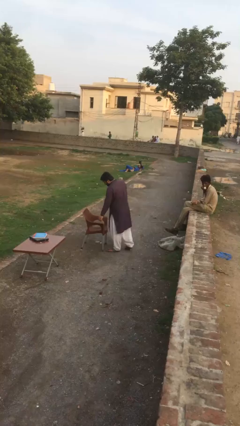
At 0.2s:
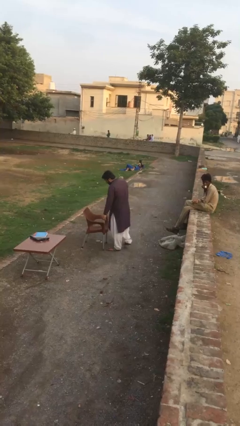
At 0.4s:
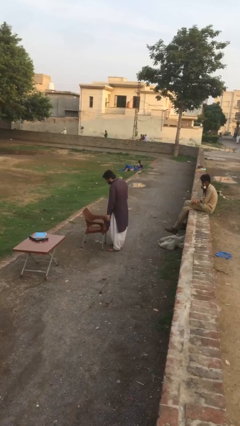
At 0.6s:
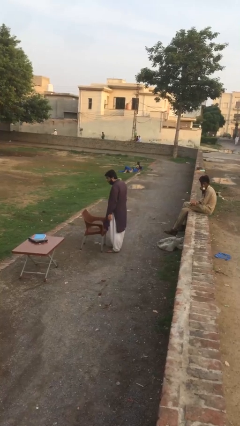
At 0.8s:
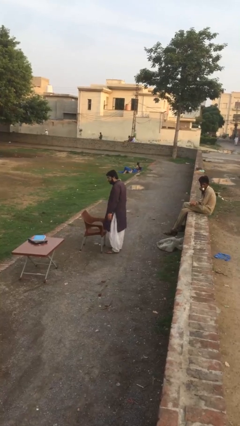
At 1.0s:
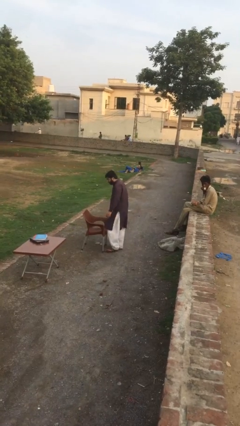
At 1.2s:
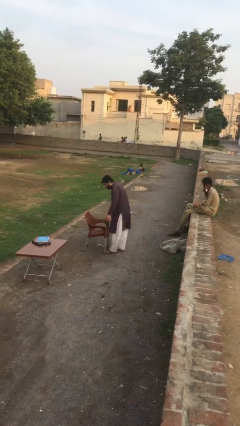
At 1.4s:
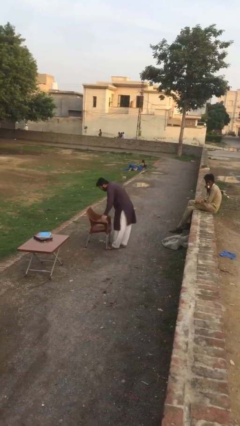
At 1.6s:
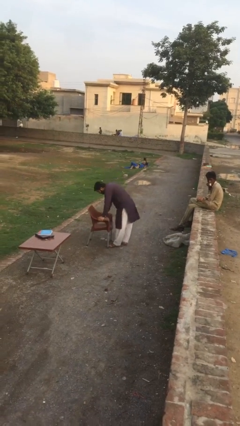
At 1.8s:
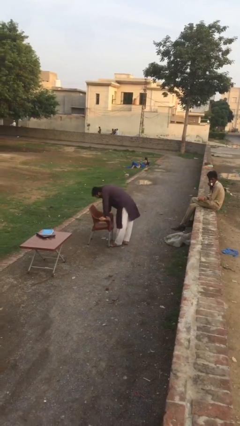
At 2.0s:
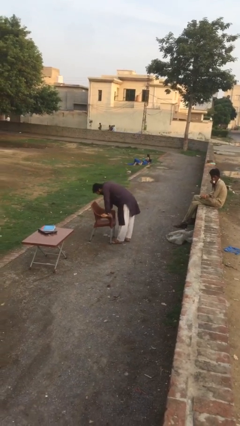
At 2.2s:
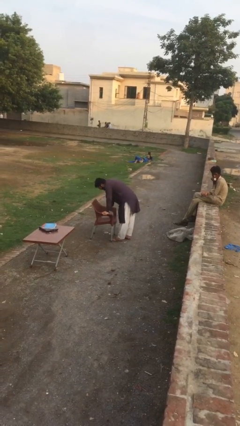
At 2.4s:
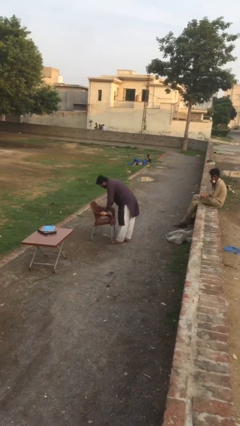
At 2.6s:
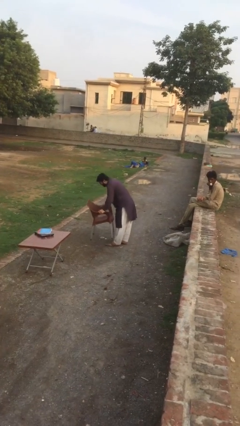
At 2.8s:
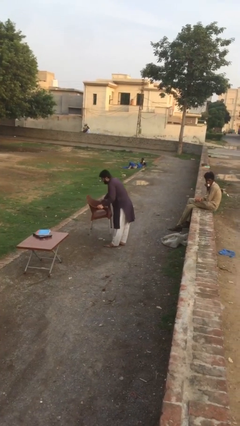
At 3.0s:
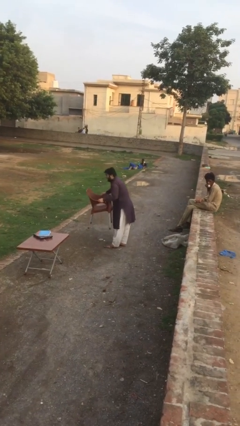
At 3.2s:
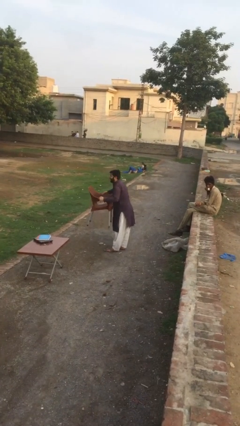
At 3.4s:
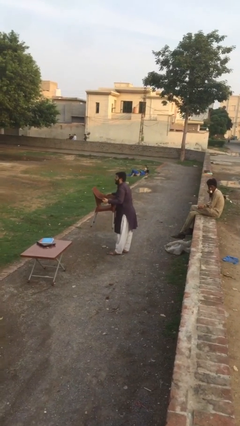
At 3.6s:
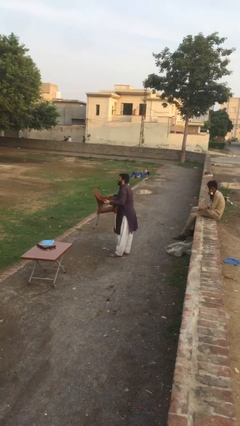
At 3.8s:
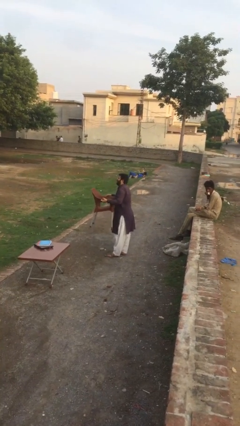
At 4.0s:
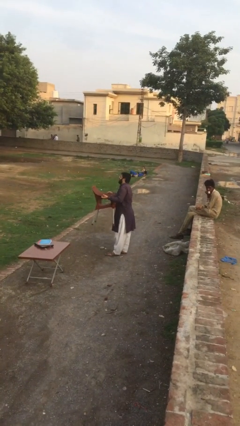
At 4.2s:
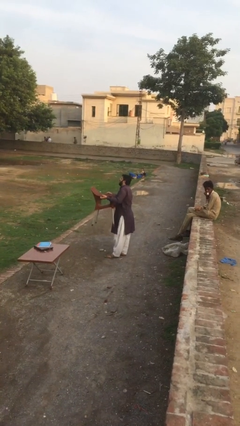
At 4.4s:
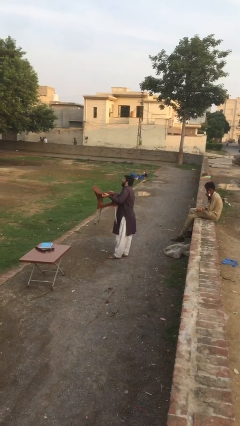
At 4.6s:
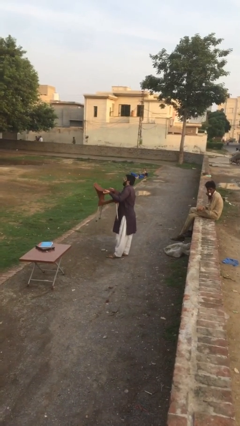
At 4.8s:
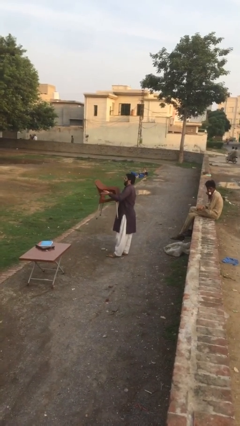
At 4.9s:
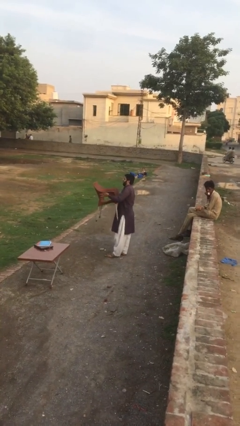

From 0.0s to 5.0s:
person picks up object from floor

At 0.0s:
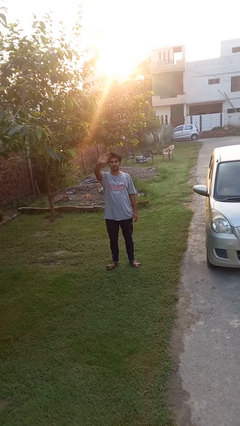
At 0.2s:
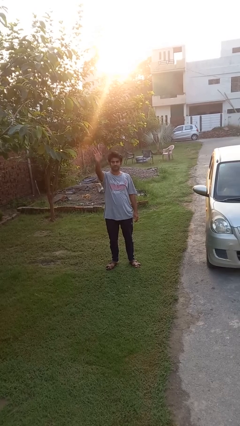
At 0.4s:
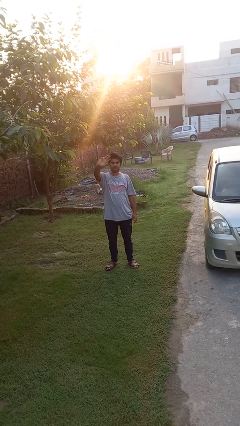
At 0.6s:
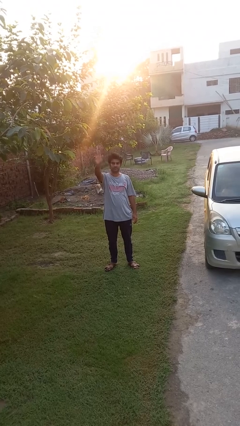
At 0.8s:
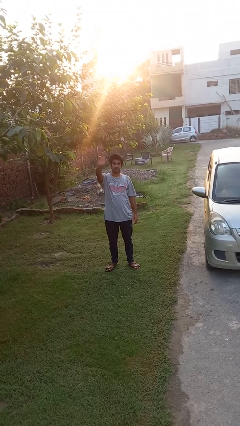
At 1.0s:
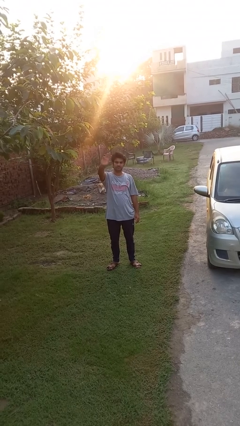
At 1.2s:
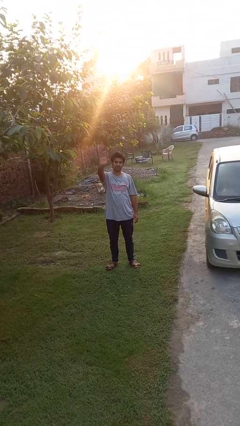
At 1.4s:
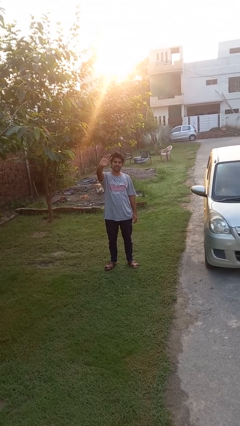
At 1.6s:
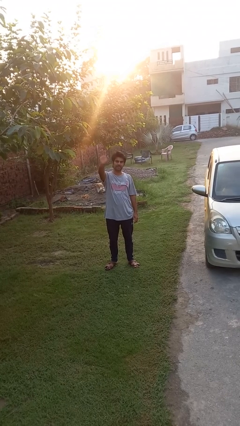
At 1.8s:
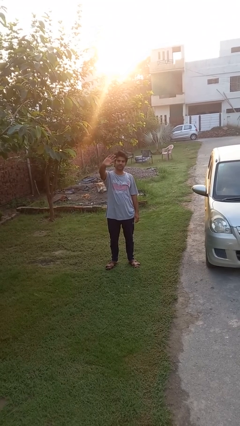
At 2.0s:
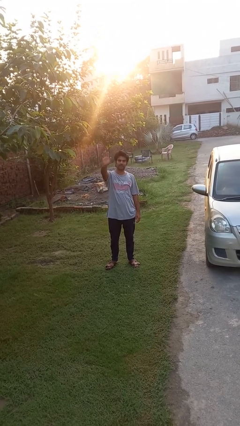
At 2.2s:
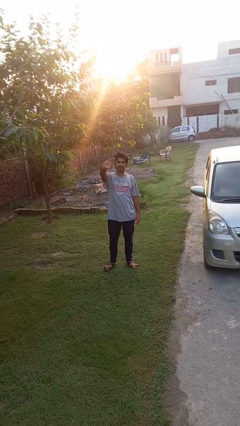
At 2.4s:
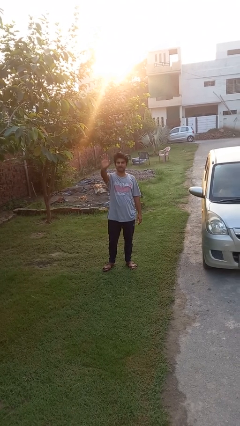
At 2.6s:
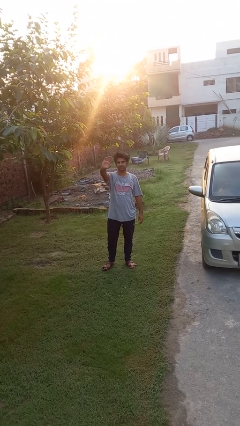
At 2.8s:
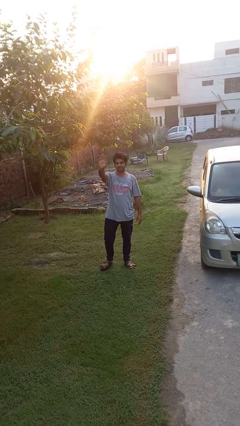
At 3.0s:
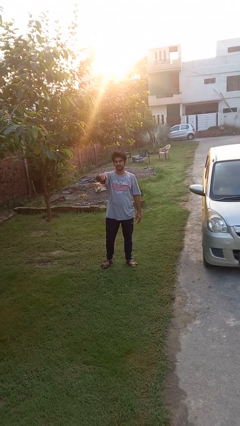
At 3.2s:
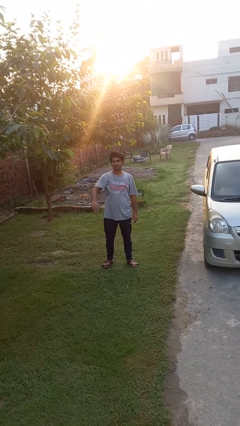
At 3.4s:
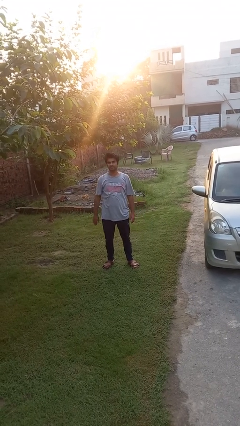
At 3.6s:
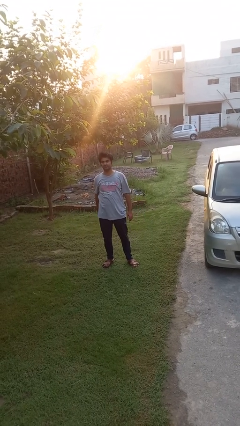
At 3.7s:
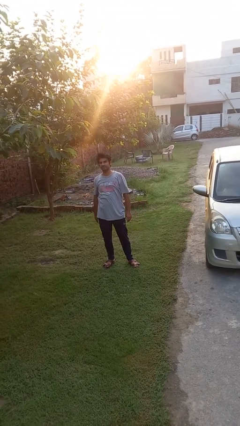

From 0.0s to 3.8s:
person waves at person

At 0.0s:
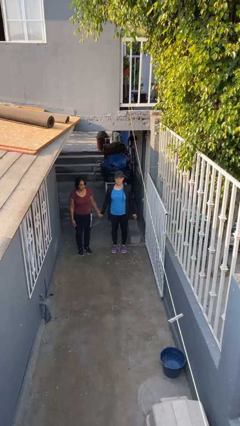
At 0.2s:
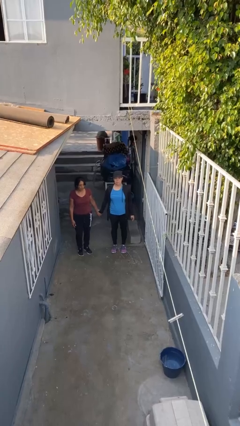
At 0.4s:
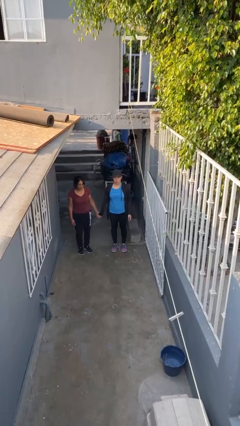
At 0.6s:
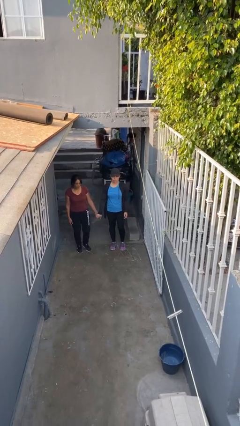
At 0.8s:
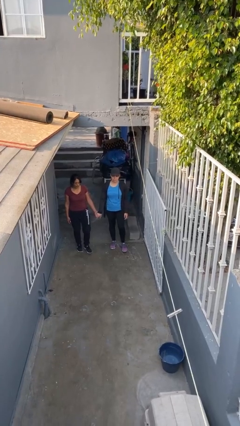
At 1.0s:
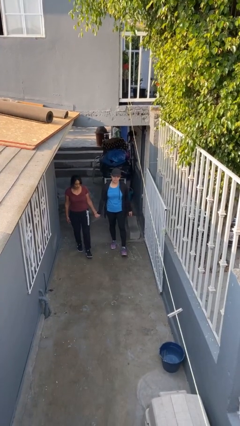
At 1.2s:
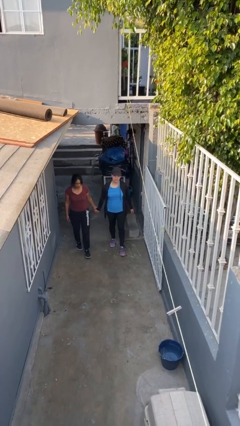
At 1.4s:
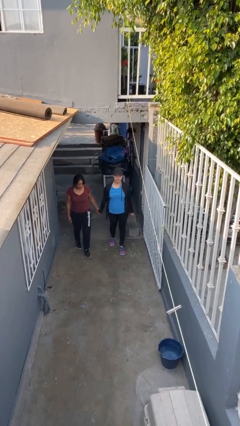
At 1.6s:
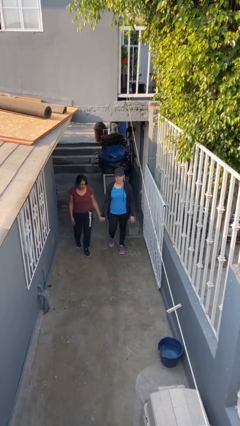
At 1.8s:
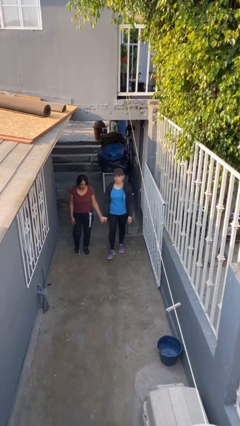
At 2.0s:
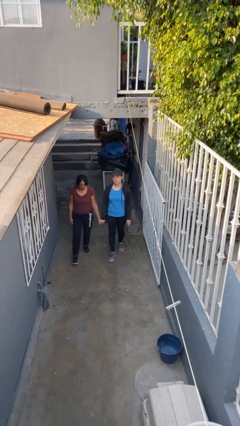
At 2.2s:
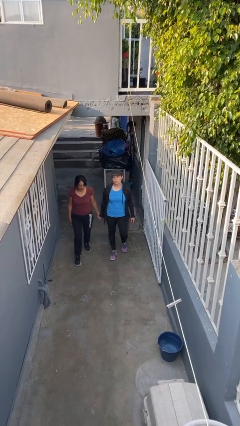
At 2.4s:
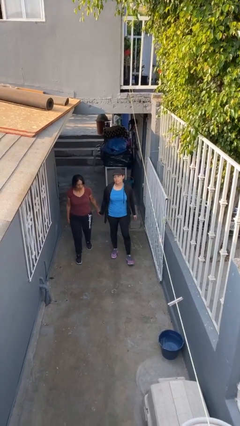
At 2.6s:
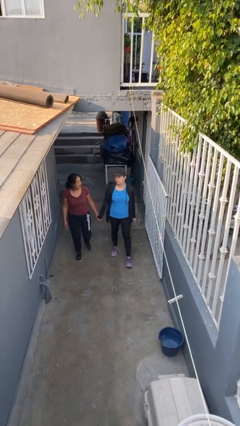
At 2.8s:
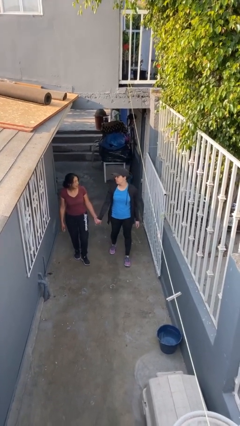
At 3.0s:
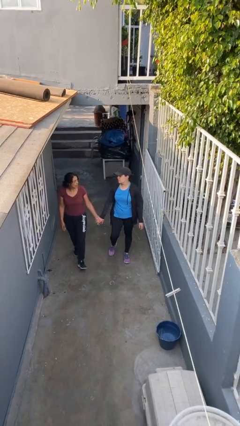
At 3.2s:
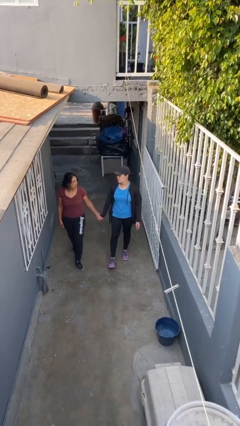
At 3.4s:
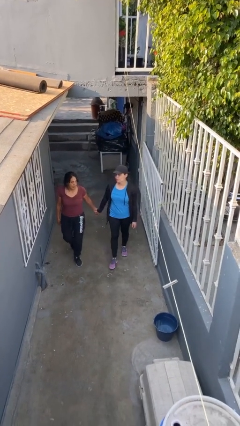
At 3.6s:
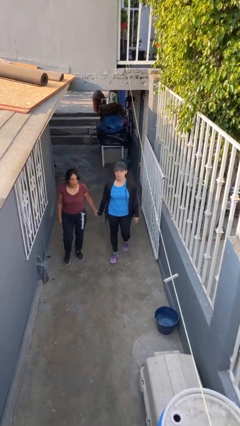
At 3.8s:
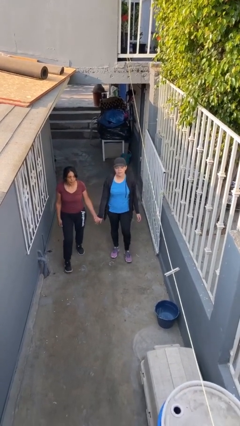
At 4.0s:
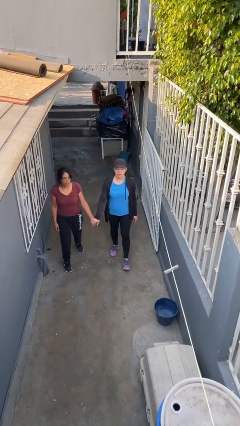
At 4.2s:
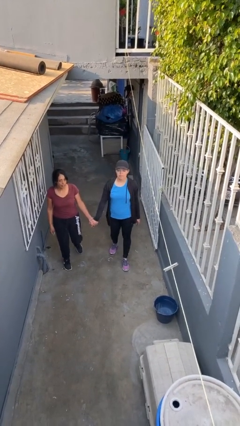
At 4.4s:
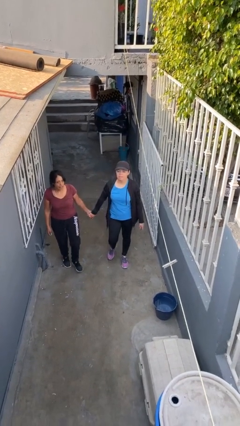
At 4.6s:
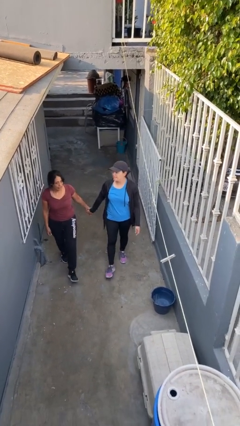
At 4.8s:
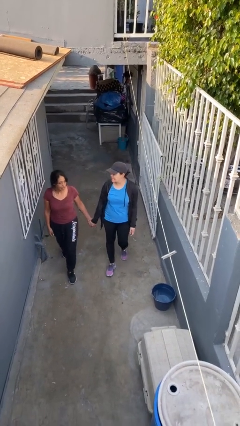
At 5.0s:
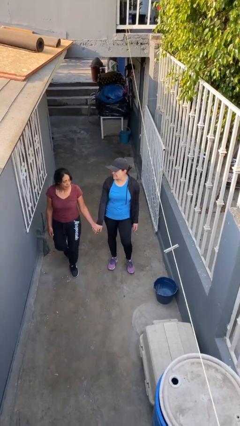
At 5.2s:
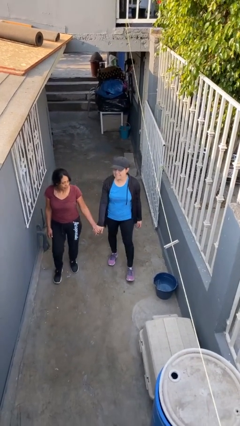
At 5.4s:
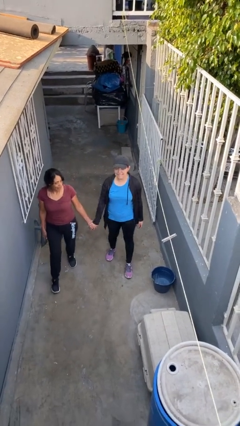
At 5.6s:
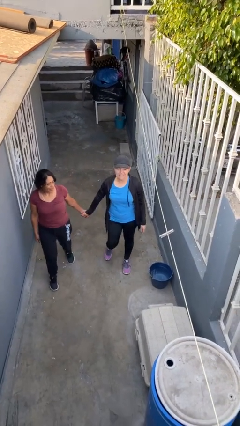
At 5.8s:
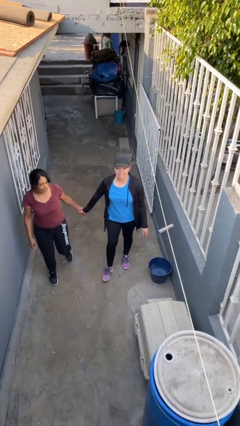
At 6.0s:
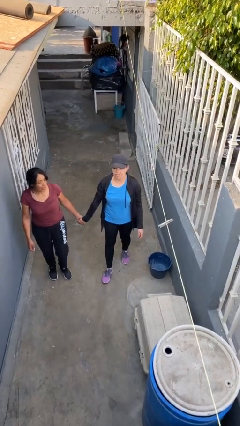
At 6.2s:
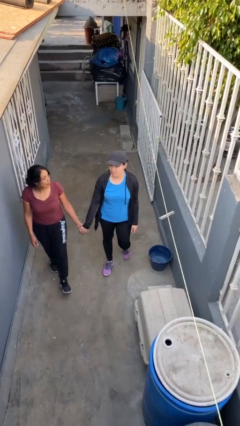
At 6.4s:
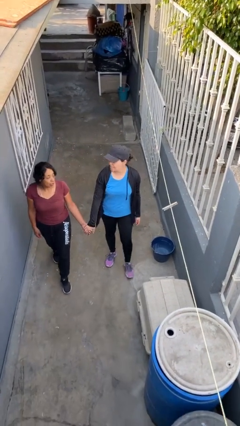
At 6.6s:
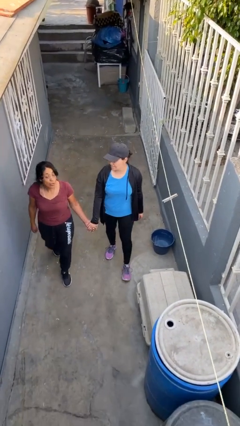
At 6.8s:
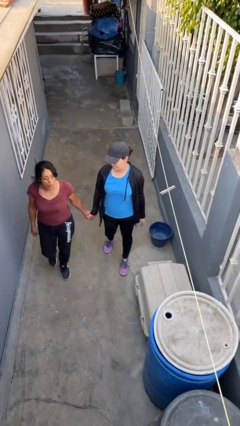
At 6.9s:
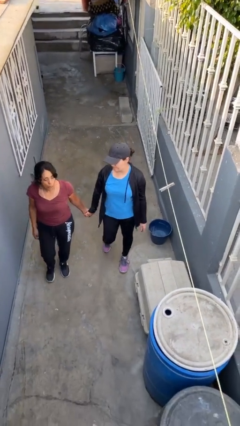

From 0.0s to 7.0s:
person holds hand

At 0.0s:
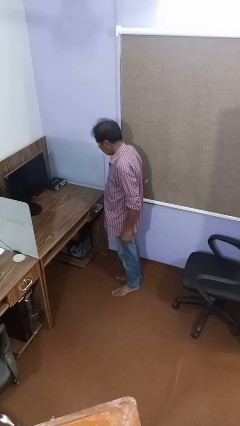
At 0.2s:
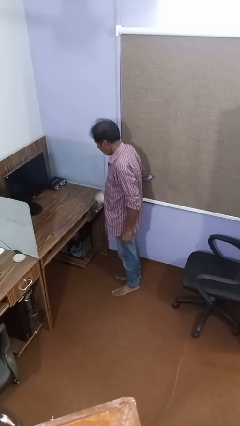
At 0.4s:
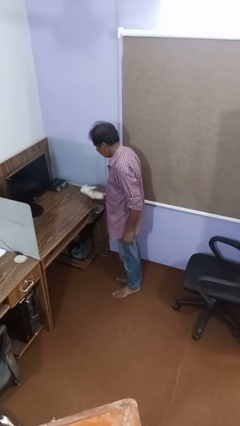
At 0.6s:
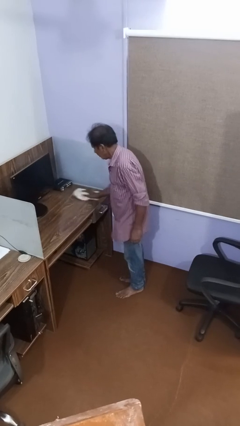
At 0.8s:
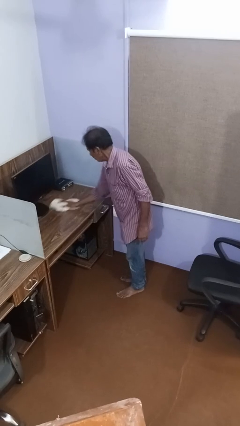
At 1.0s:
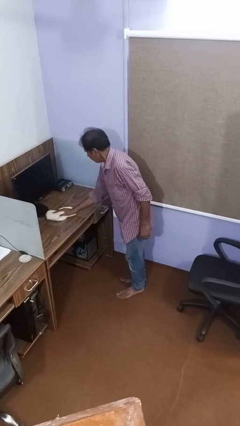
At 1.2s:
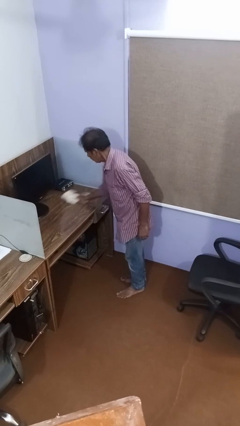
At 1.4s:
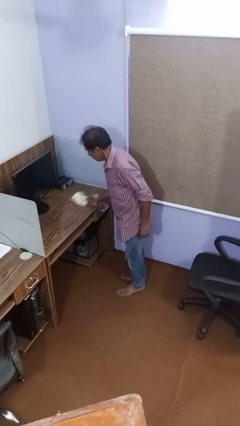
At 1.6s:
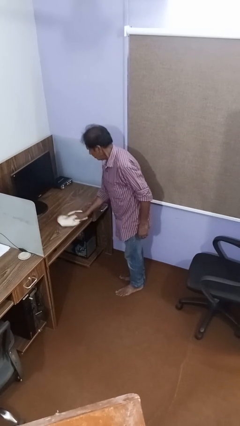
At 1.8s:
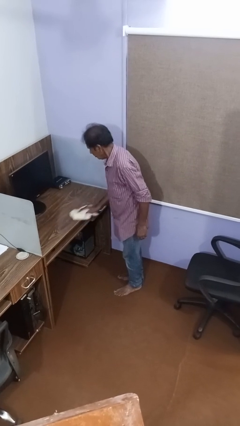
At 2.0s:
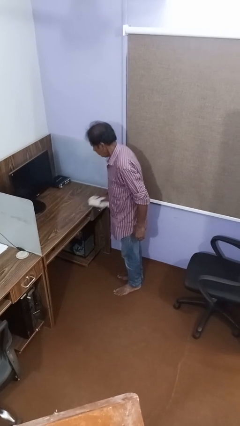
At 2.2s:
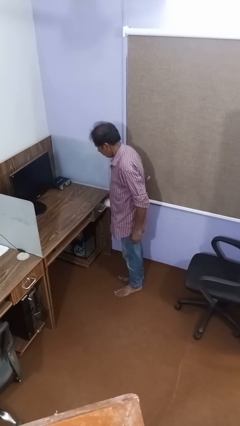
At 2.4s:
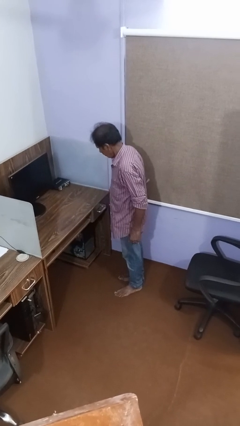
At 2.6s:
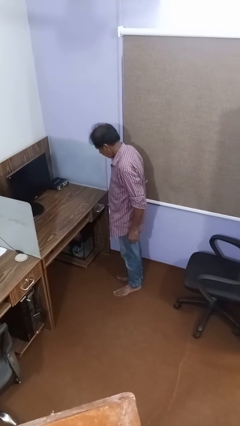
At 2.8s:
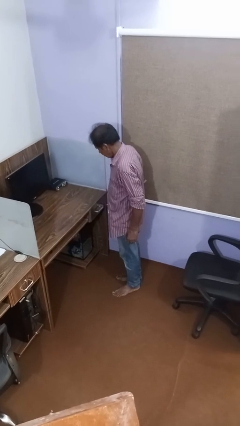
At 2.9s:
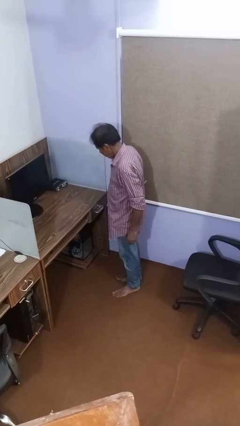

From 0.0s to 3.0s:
person cleans table with rag
